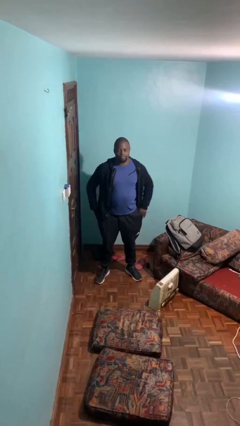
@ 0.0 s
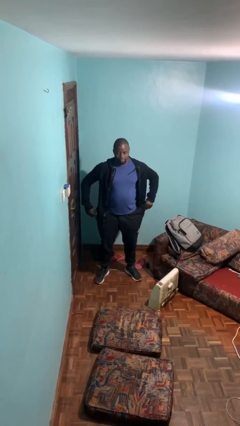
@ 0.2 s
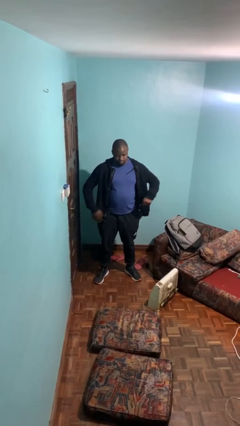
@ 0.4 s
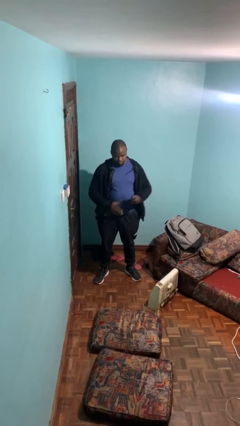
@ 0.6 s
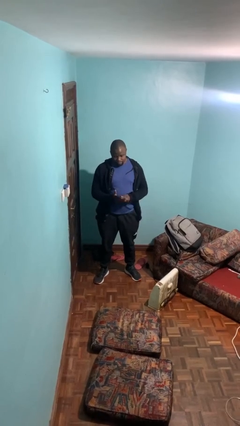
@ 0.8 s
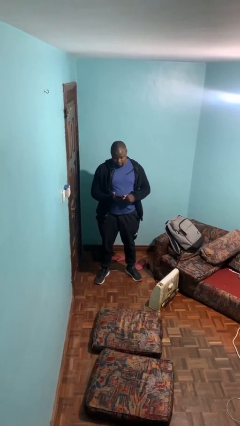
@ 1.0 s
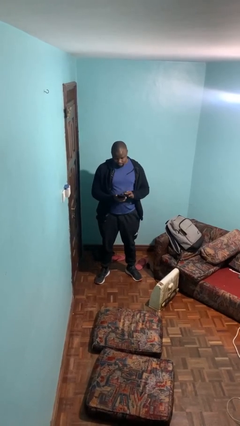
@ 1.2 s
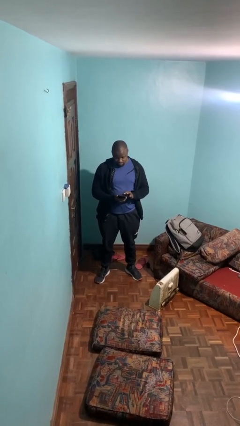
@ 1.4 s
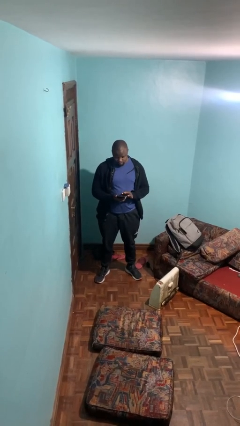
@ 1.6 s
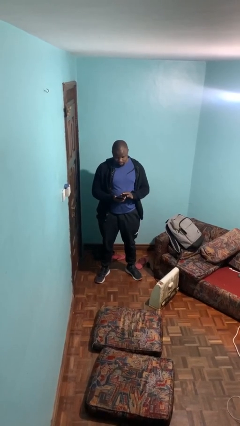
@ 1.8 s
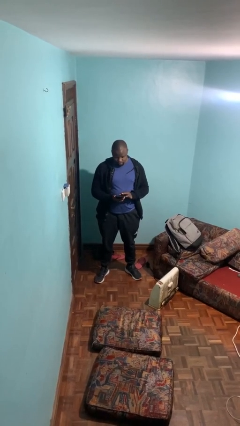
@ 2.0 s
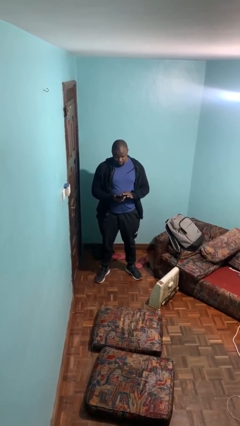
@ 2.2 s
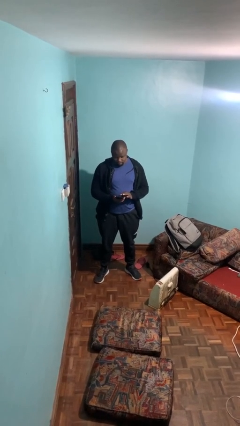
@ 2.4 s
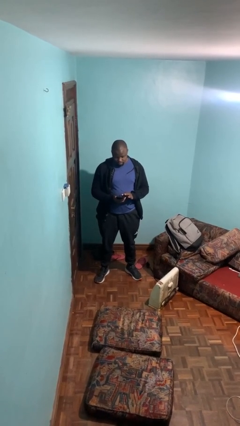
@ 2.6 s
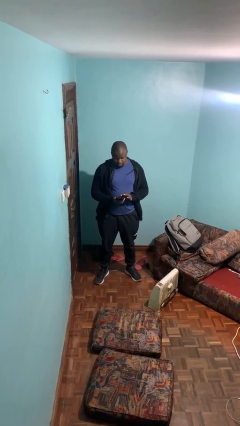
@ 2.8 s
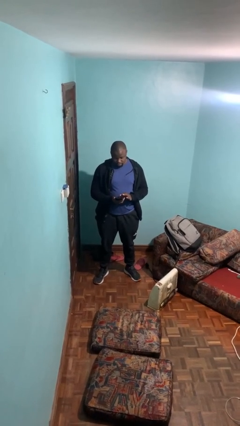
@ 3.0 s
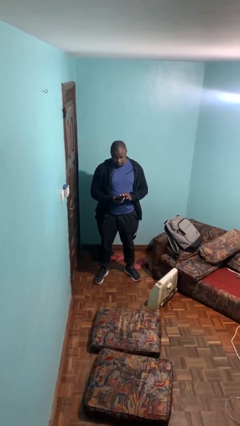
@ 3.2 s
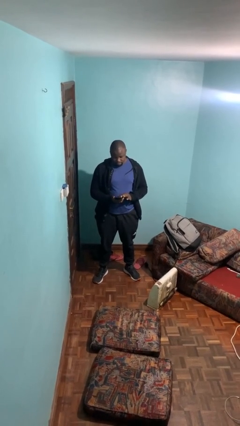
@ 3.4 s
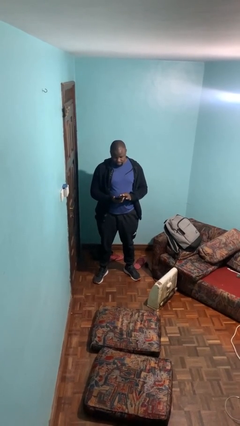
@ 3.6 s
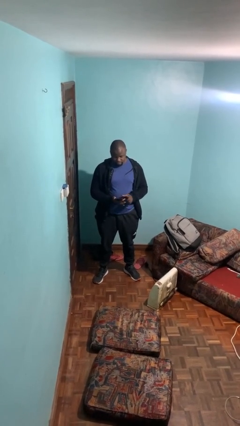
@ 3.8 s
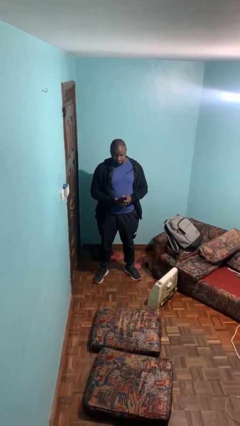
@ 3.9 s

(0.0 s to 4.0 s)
person takes phone from pocket

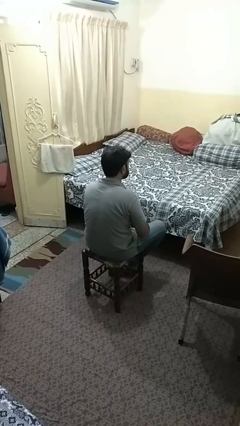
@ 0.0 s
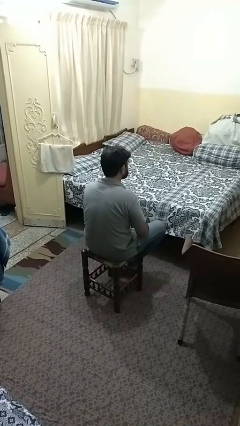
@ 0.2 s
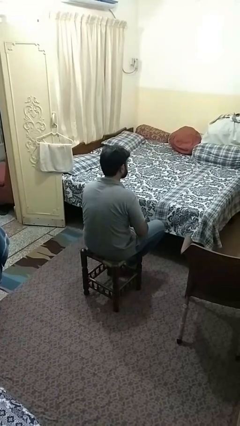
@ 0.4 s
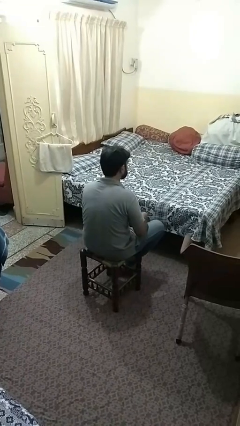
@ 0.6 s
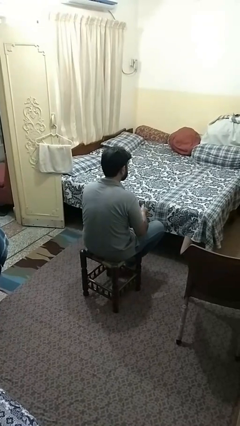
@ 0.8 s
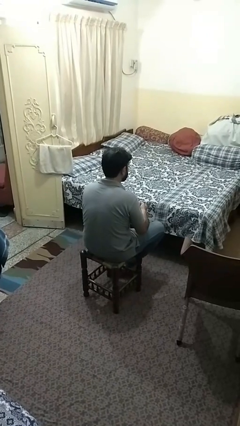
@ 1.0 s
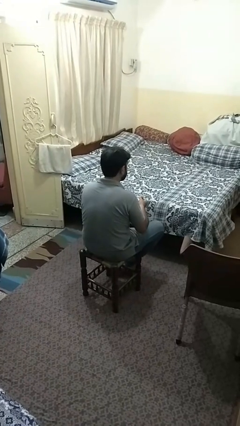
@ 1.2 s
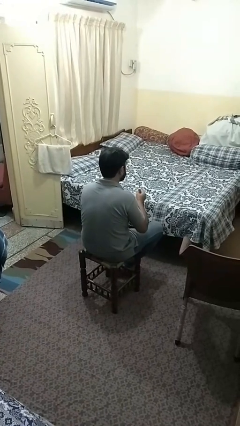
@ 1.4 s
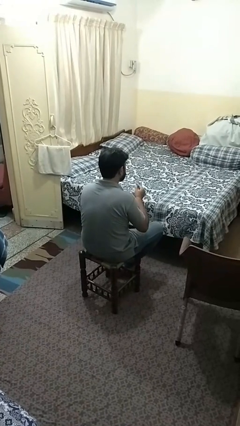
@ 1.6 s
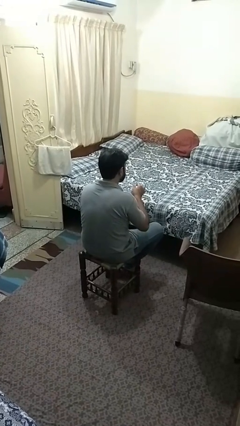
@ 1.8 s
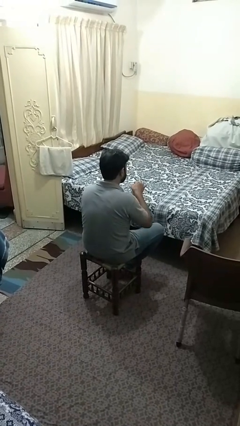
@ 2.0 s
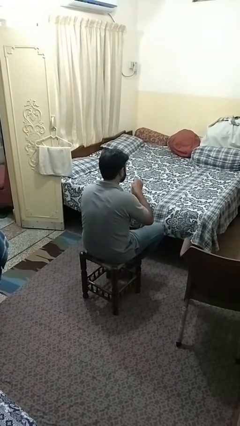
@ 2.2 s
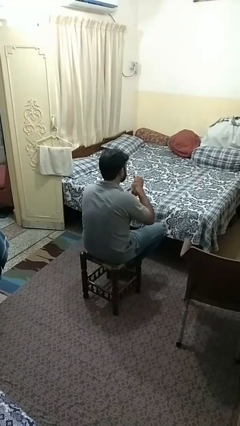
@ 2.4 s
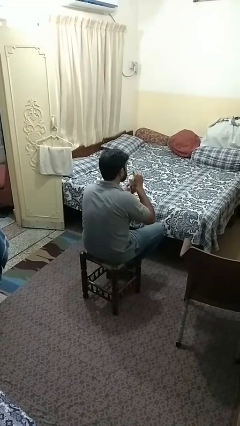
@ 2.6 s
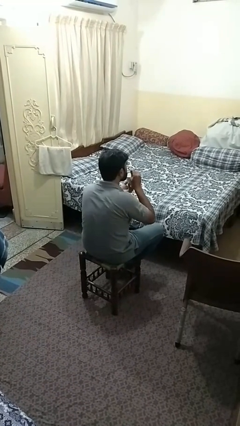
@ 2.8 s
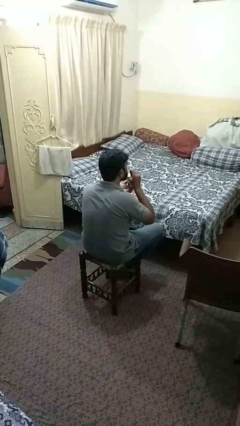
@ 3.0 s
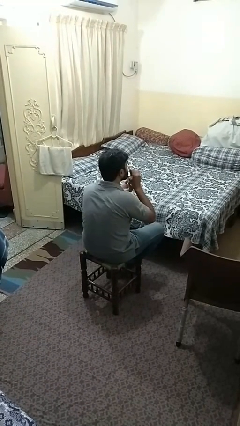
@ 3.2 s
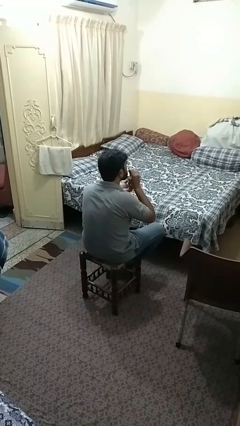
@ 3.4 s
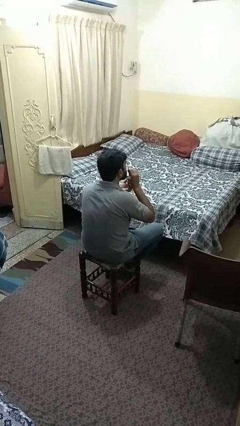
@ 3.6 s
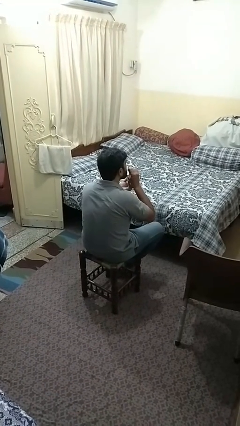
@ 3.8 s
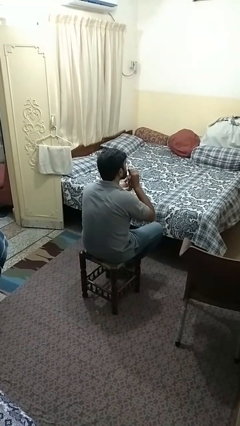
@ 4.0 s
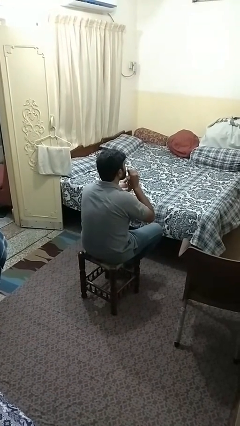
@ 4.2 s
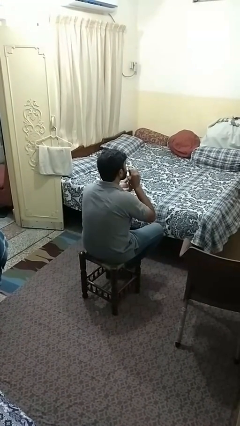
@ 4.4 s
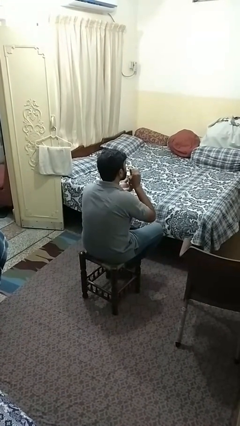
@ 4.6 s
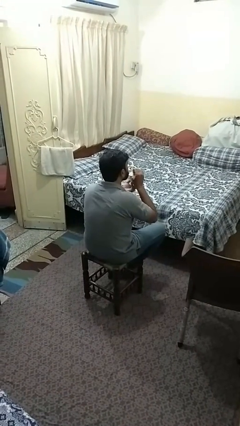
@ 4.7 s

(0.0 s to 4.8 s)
person drinks from straw

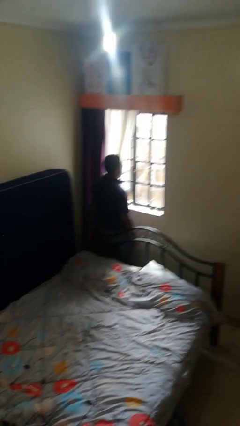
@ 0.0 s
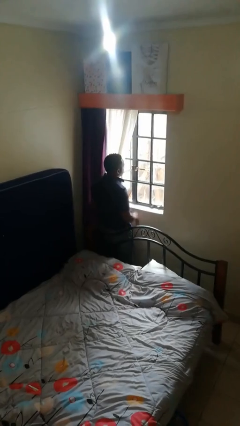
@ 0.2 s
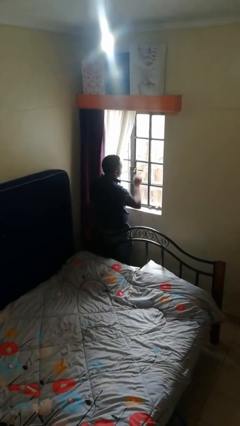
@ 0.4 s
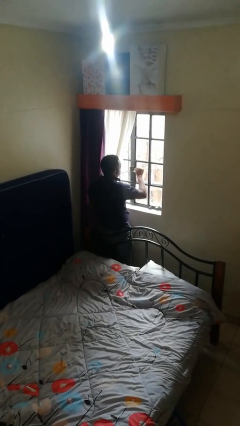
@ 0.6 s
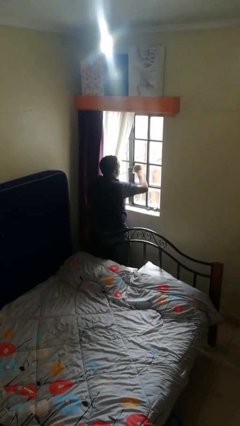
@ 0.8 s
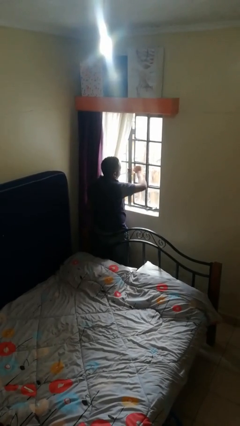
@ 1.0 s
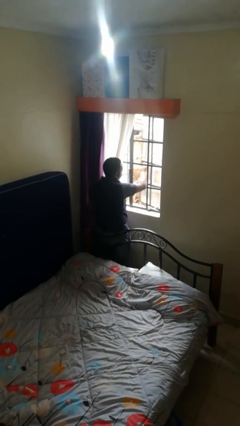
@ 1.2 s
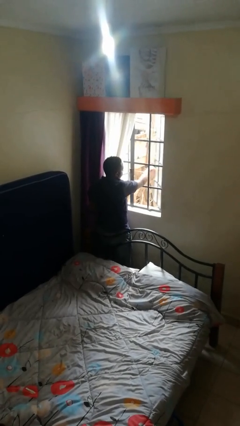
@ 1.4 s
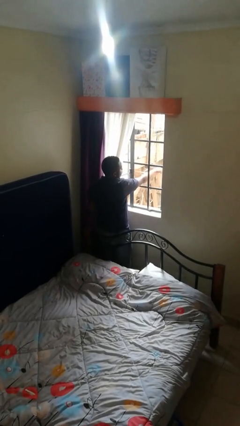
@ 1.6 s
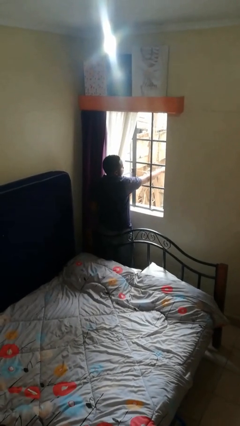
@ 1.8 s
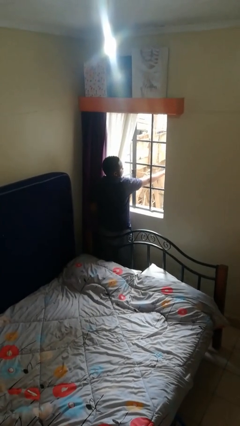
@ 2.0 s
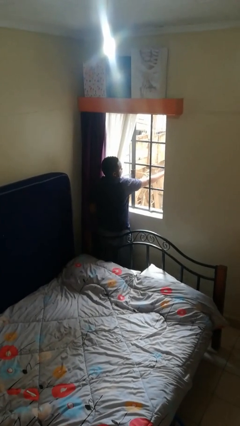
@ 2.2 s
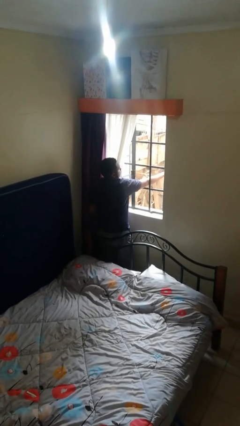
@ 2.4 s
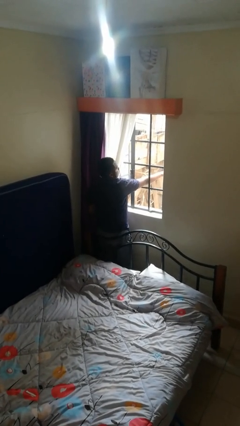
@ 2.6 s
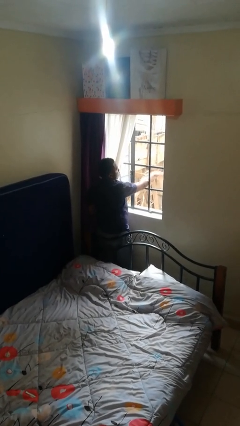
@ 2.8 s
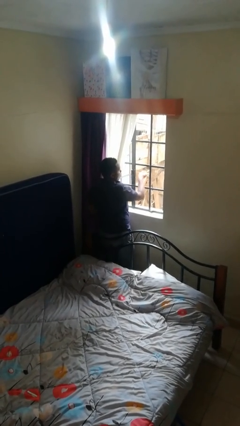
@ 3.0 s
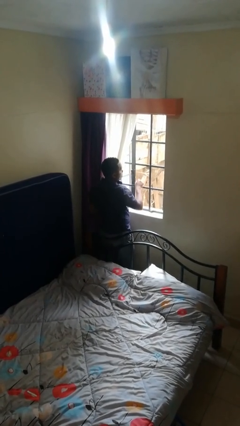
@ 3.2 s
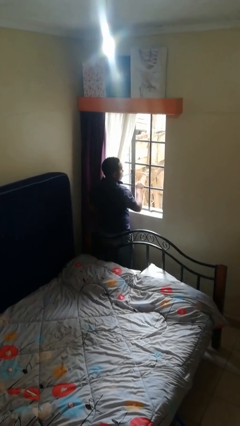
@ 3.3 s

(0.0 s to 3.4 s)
person opens home window

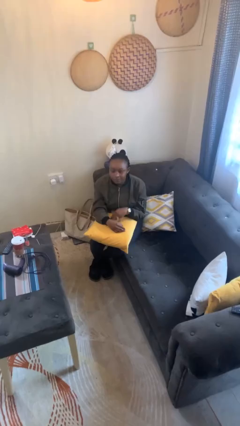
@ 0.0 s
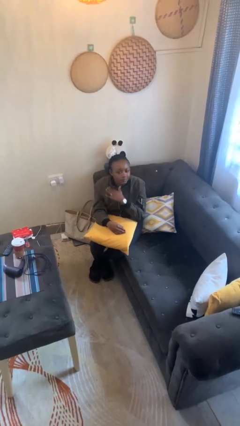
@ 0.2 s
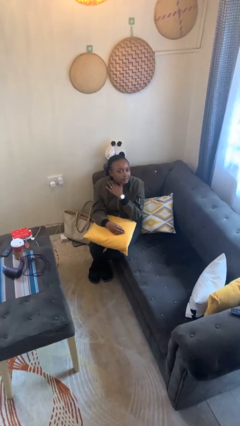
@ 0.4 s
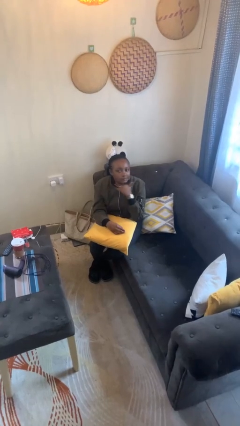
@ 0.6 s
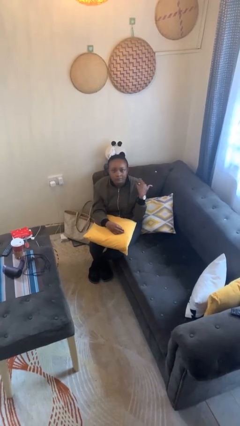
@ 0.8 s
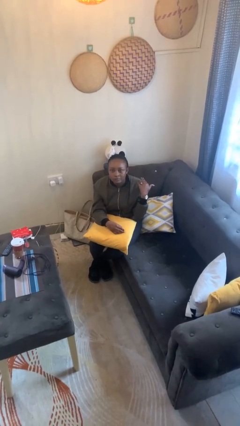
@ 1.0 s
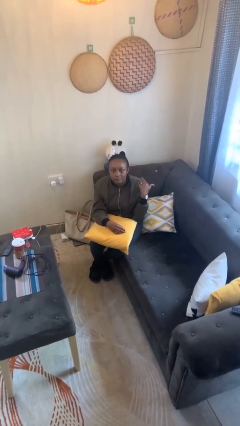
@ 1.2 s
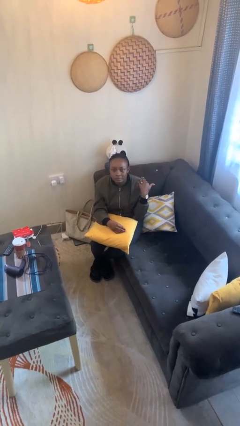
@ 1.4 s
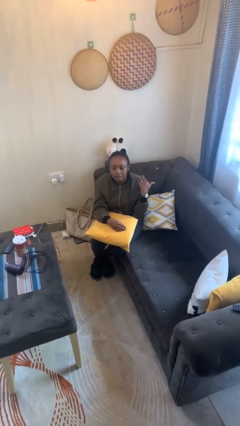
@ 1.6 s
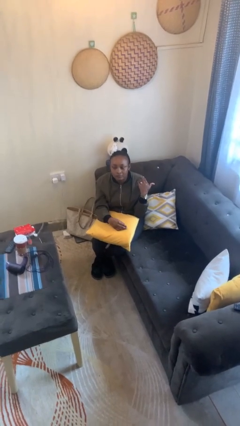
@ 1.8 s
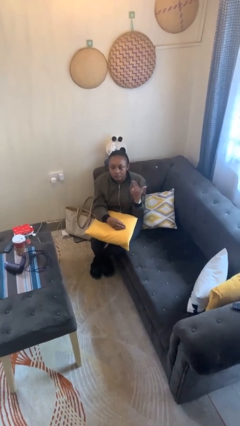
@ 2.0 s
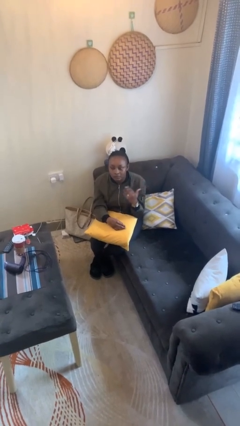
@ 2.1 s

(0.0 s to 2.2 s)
person gestures cut

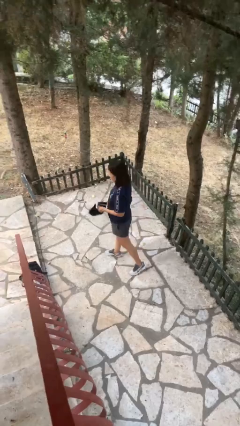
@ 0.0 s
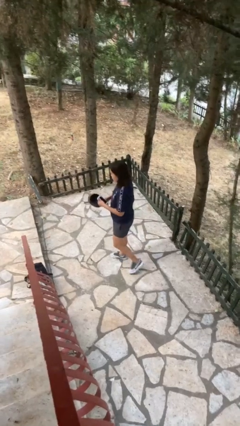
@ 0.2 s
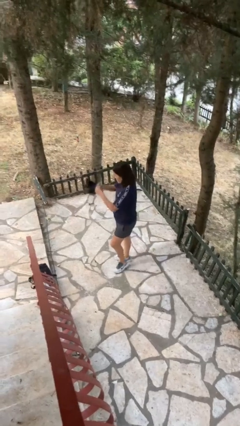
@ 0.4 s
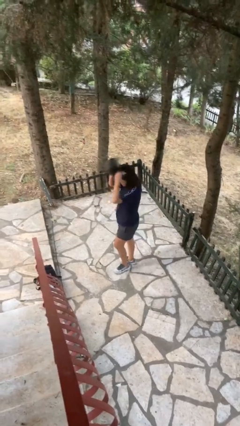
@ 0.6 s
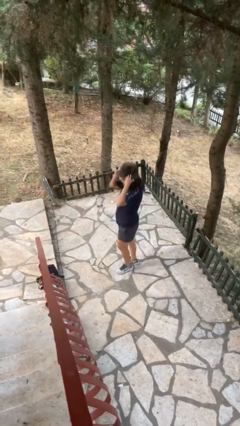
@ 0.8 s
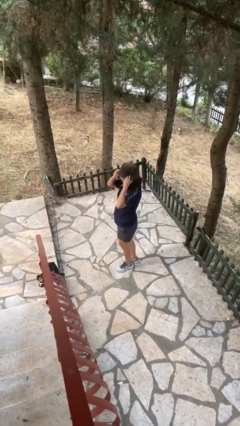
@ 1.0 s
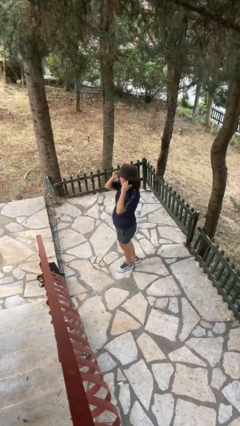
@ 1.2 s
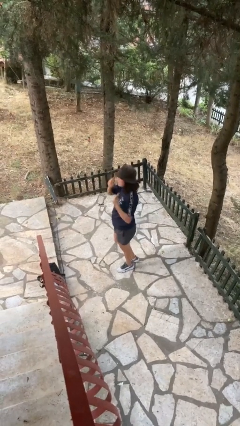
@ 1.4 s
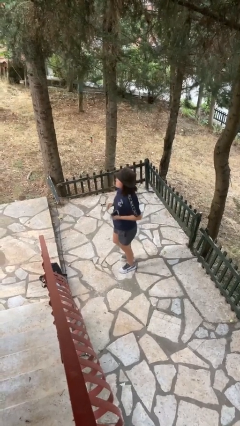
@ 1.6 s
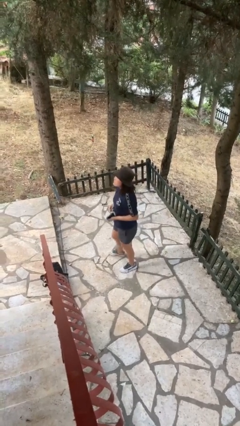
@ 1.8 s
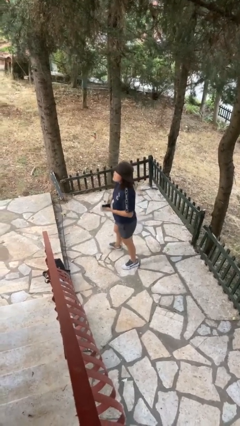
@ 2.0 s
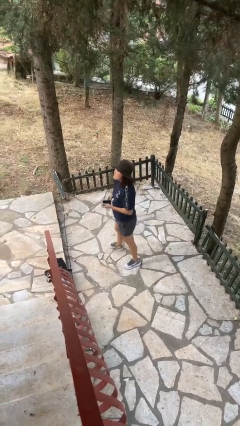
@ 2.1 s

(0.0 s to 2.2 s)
person puts on hat

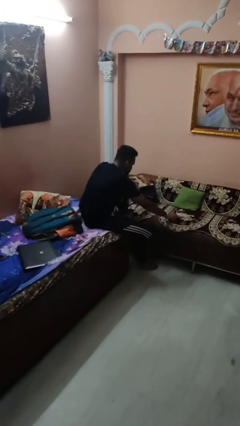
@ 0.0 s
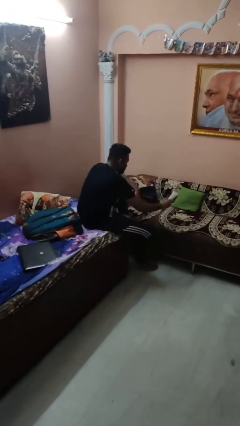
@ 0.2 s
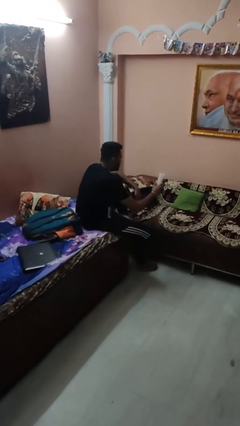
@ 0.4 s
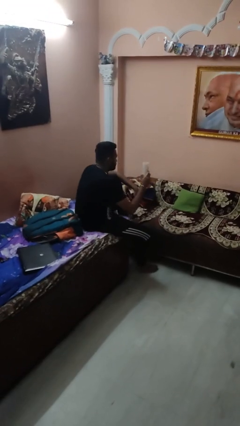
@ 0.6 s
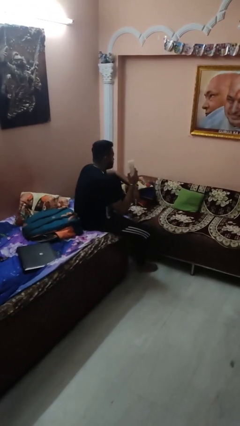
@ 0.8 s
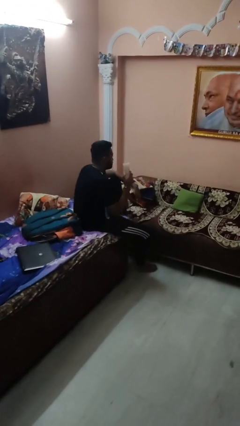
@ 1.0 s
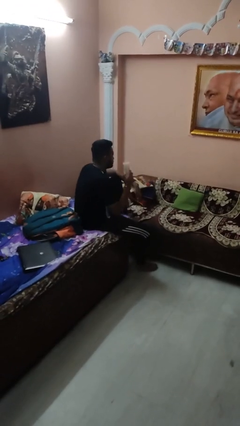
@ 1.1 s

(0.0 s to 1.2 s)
person picks up object from couch
